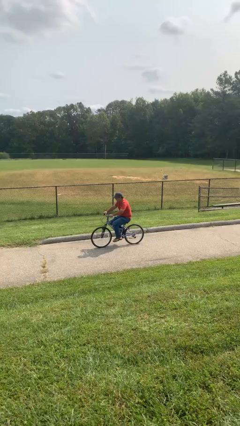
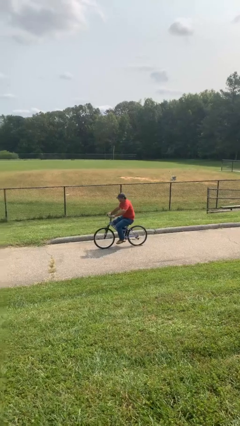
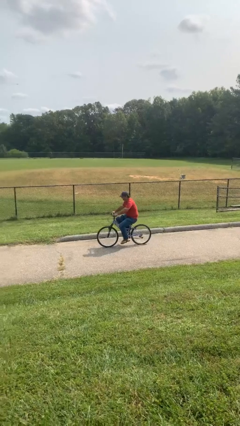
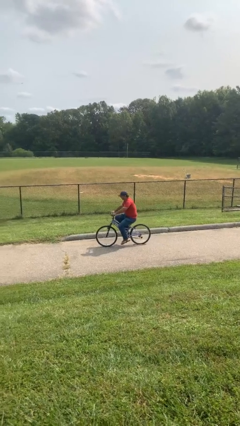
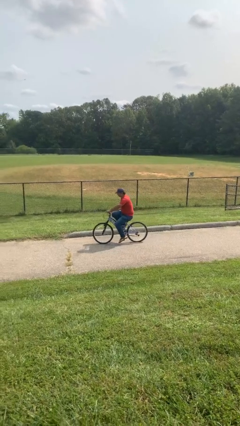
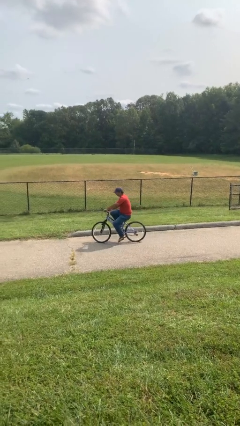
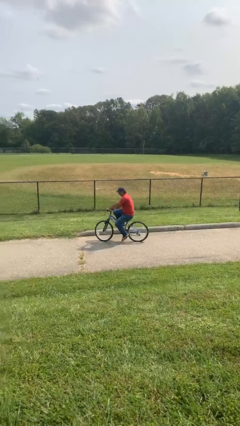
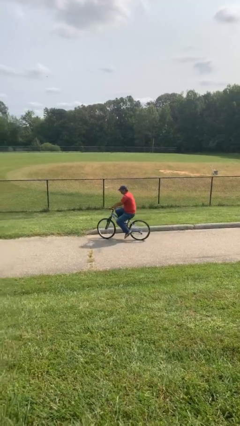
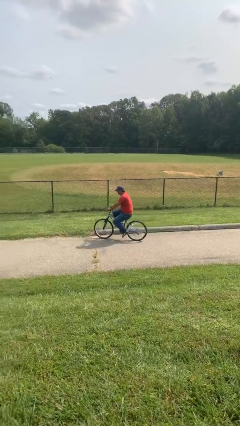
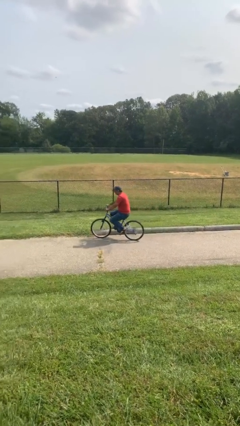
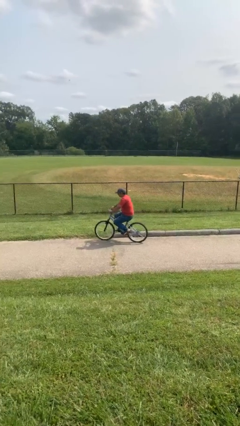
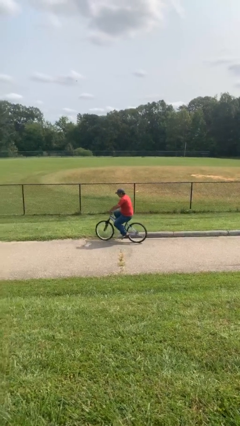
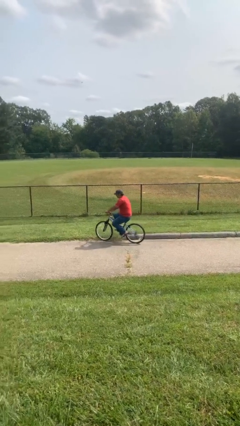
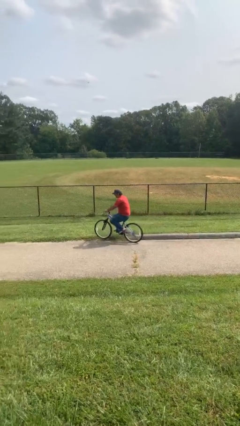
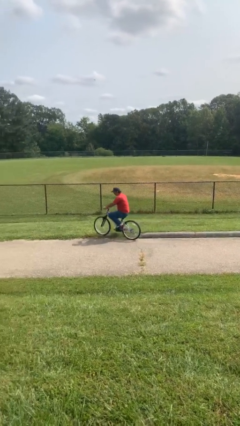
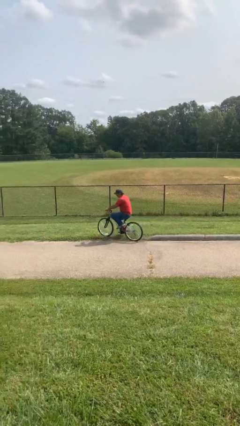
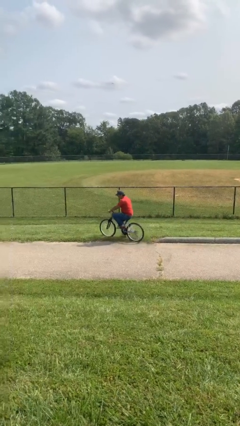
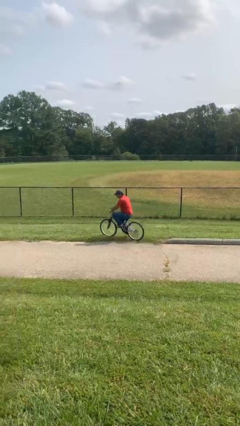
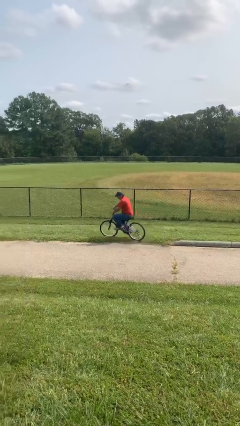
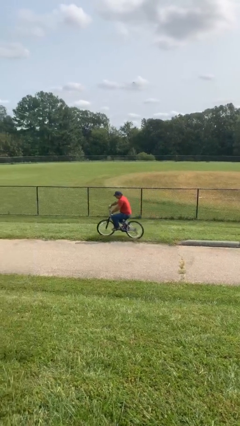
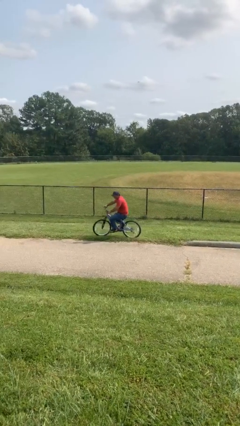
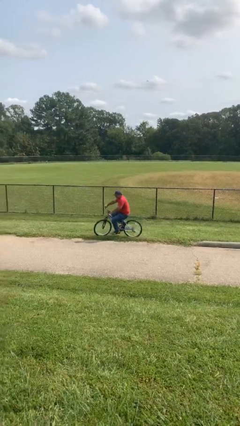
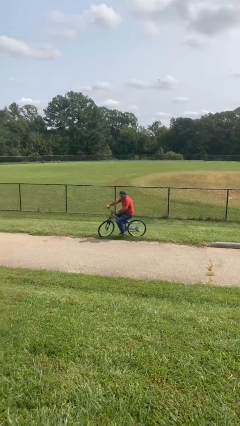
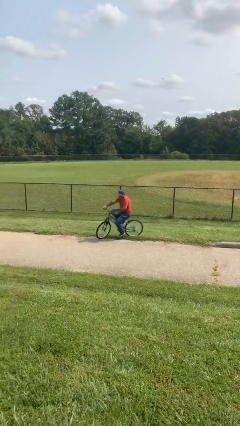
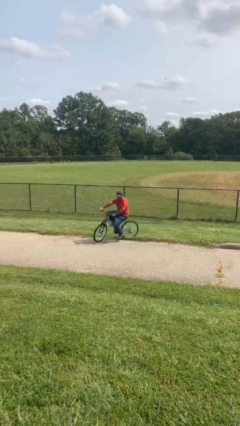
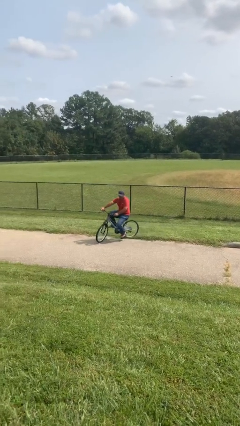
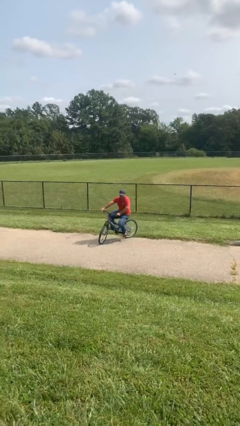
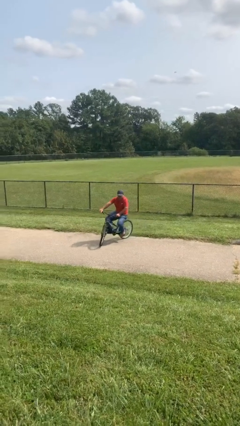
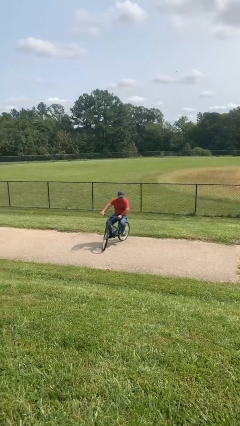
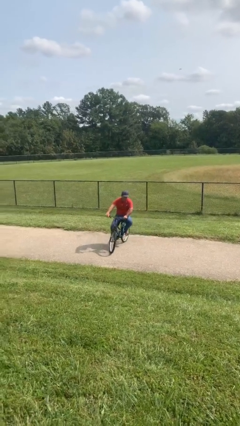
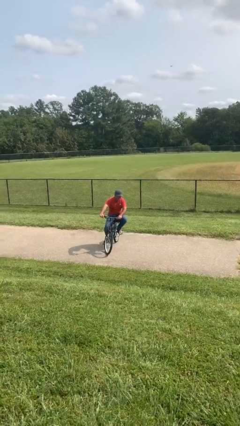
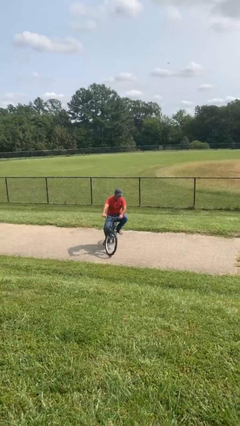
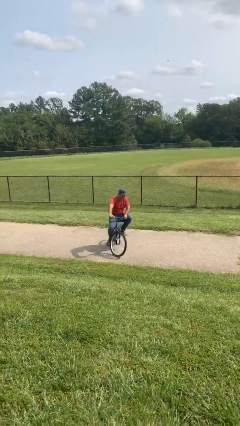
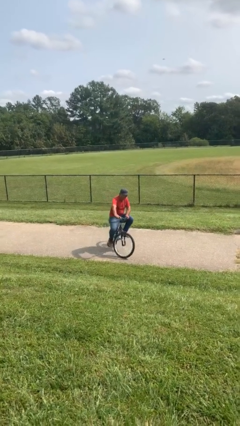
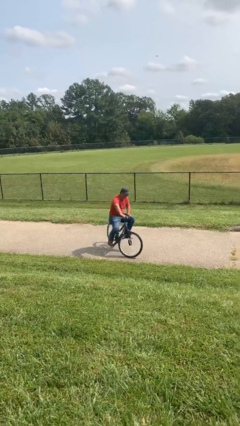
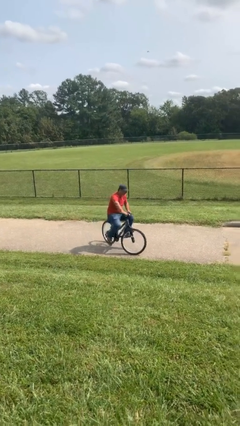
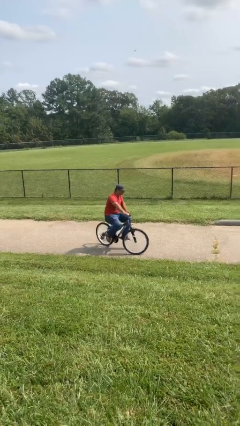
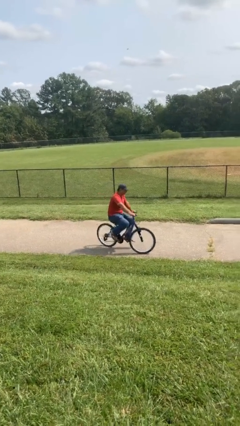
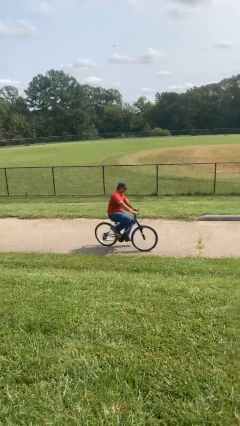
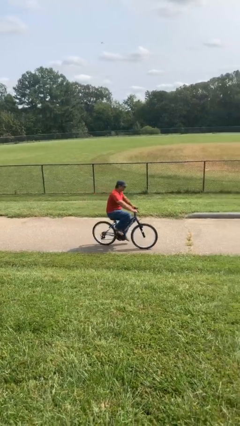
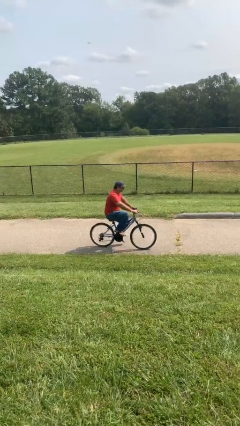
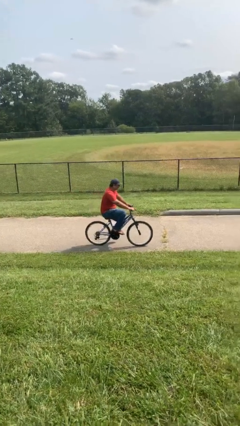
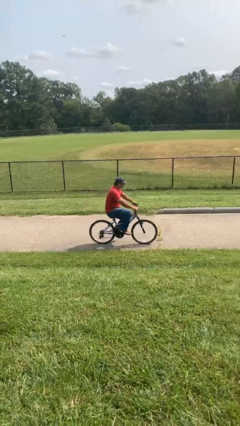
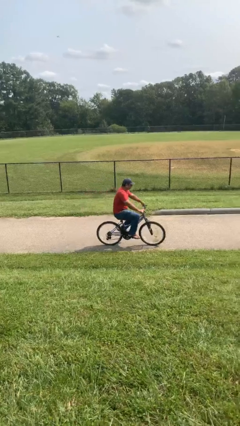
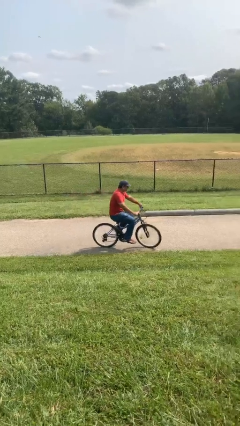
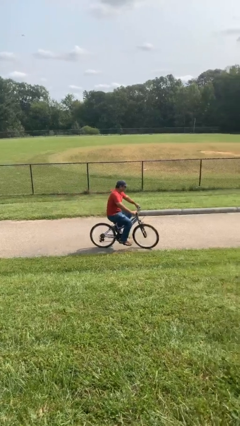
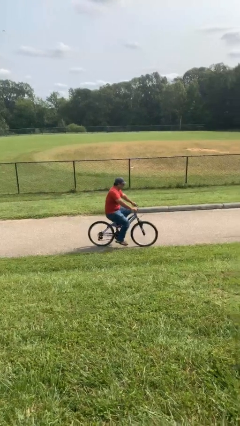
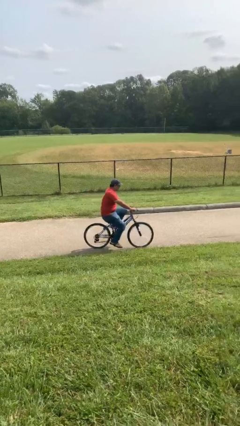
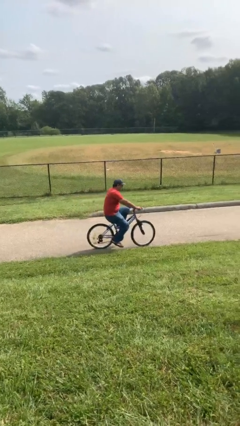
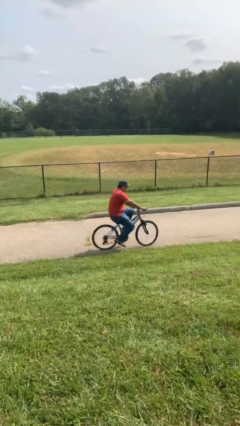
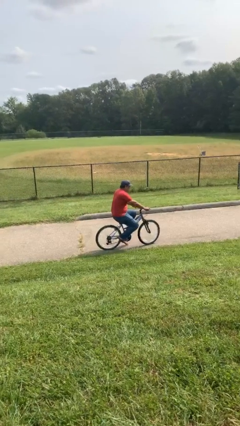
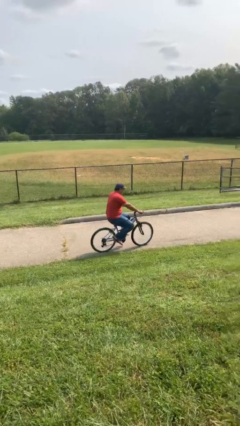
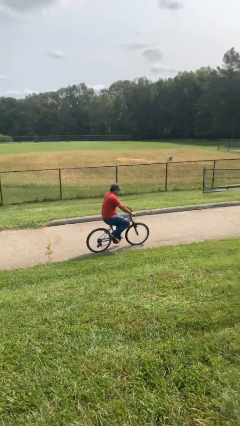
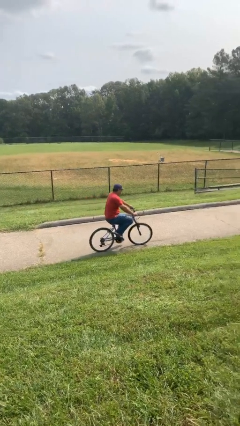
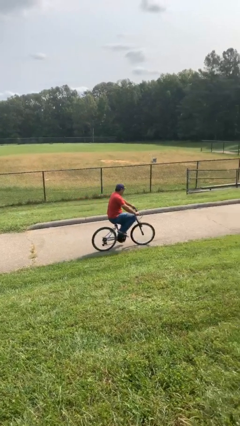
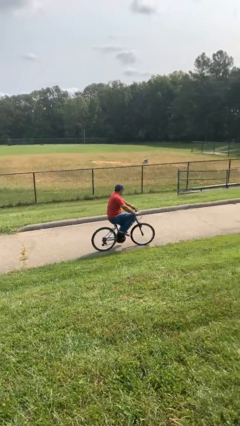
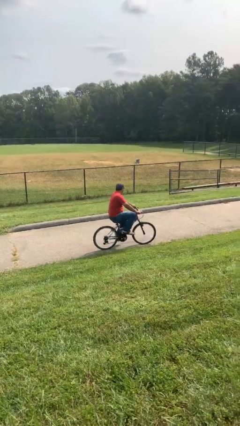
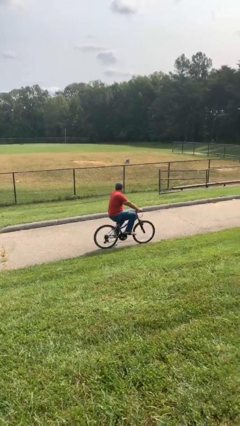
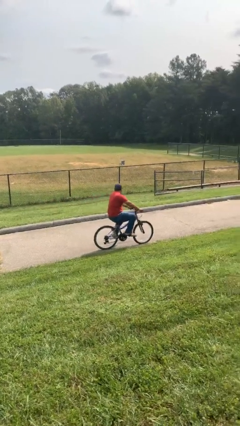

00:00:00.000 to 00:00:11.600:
person rides bicycle

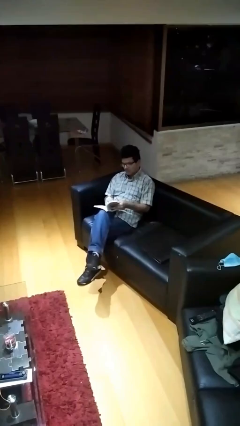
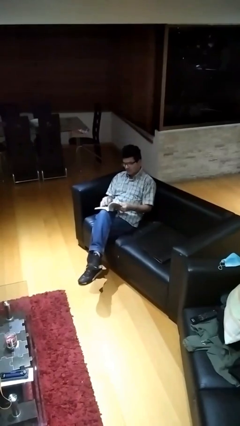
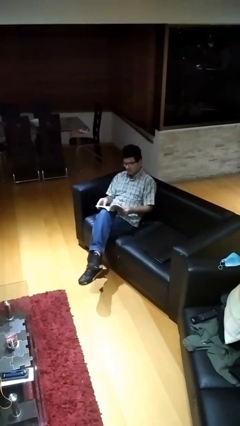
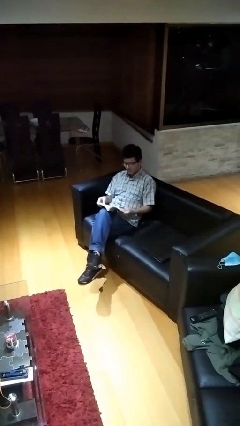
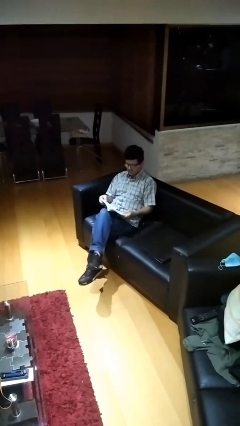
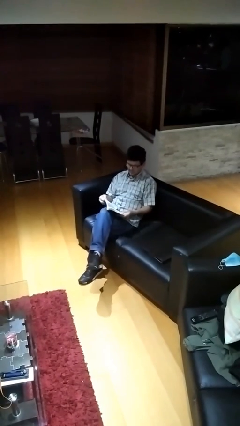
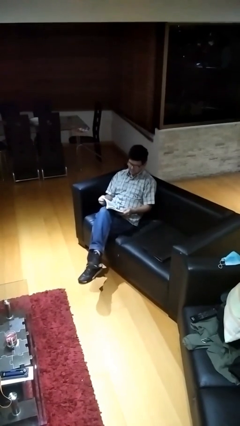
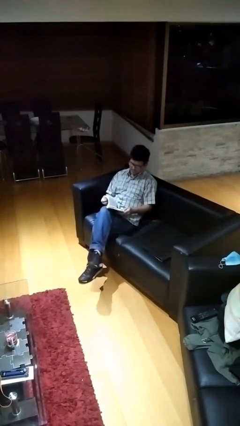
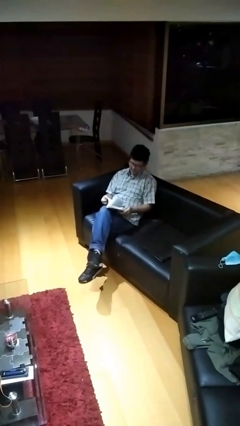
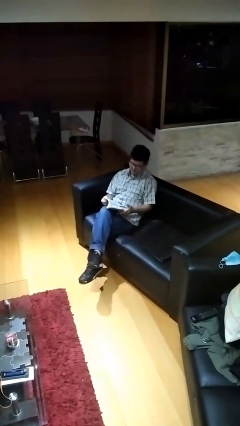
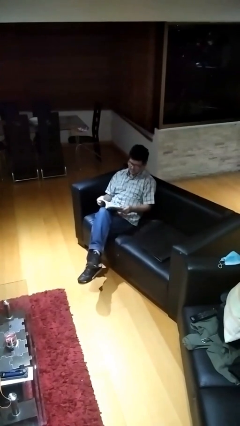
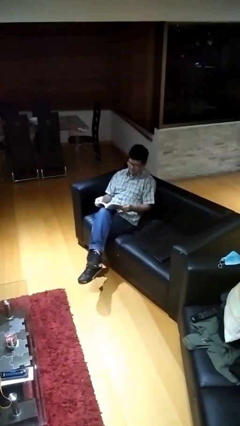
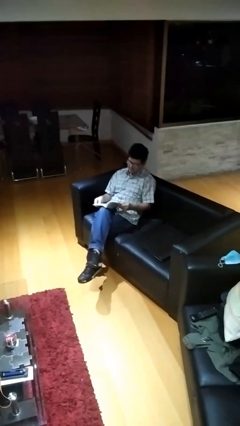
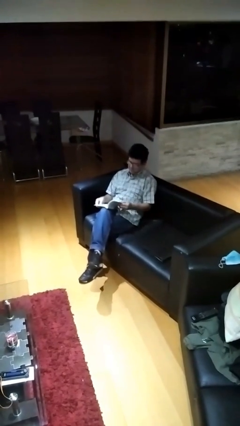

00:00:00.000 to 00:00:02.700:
person reads document

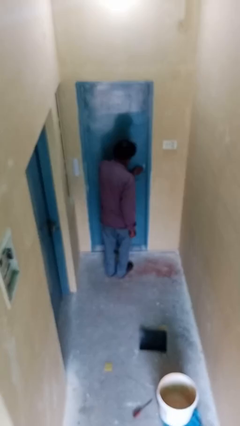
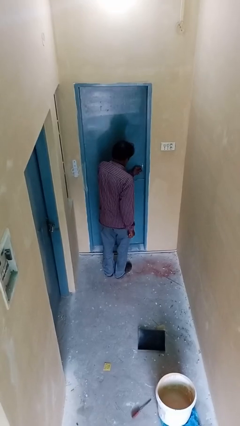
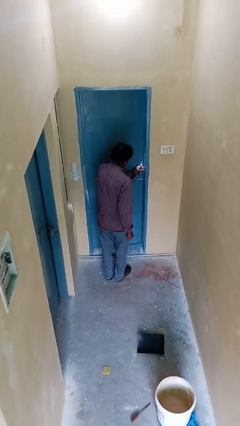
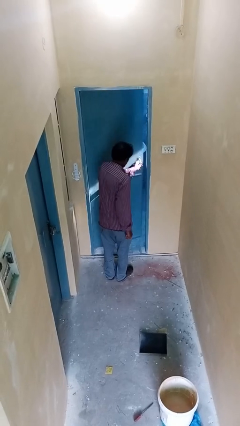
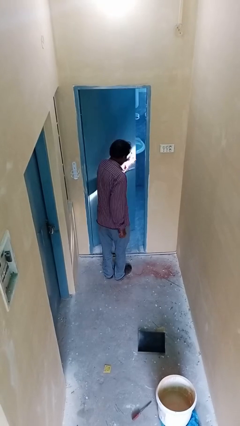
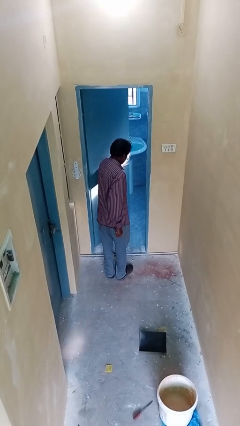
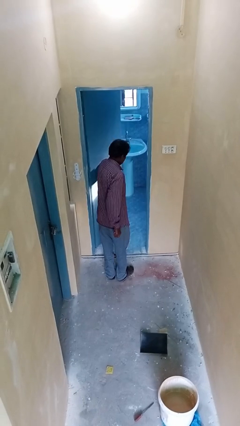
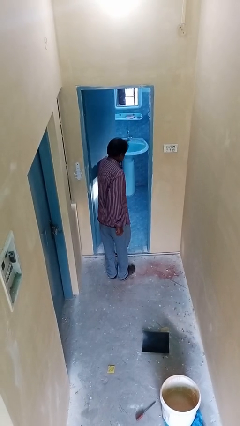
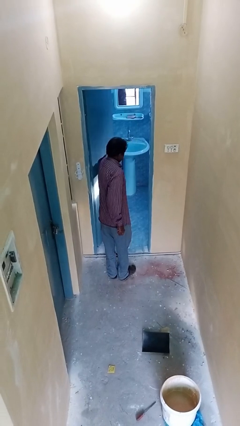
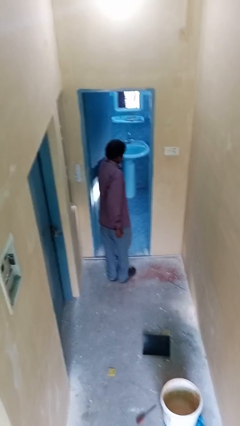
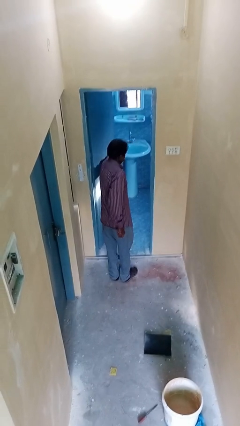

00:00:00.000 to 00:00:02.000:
person opens facility door

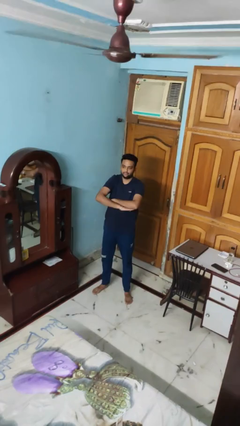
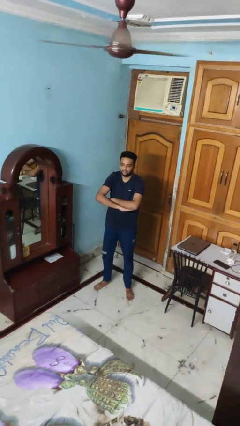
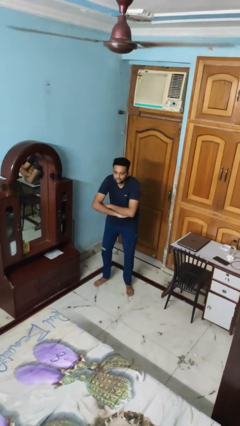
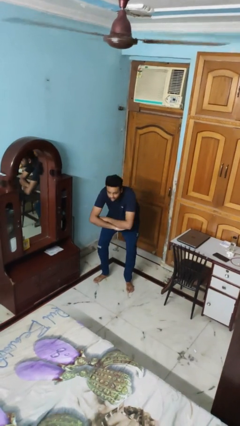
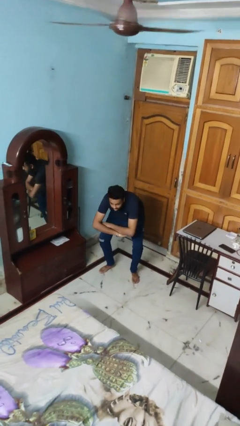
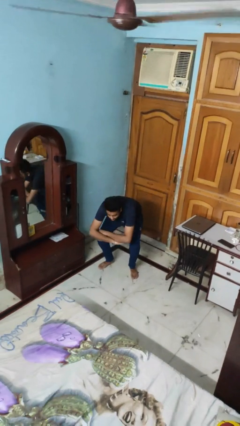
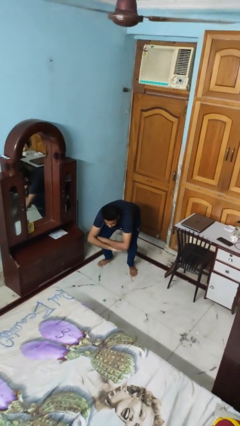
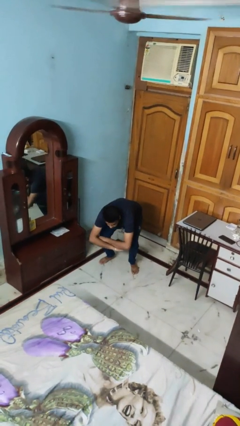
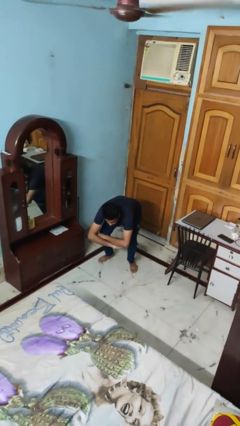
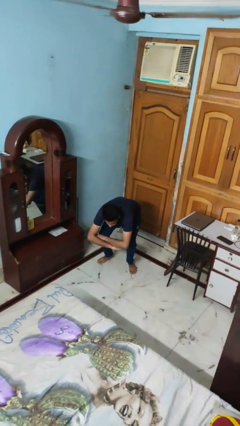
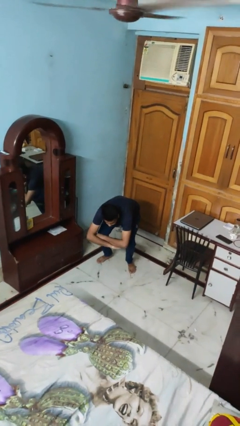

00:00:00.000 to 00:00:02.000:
person squats
